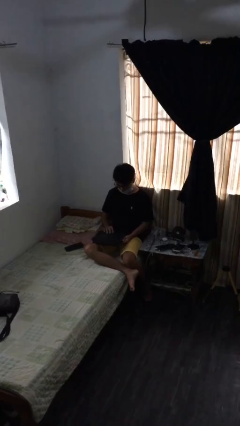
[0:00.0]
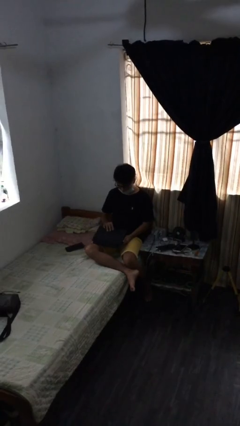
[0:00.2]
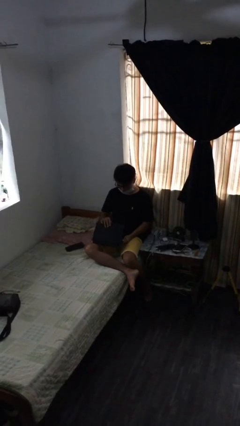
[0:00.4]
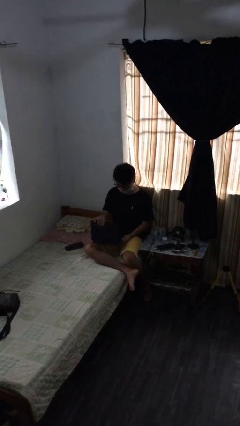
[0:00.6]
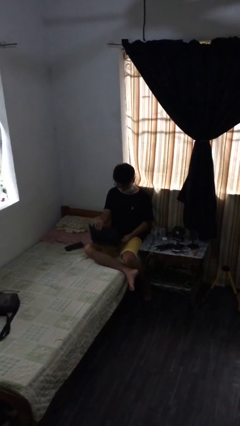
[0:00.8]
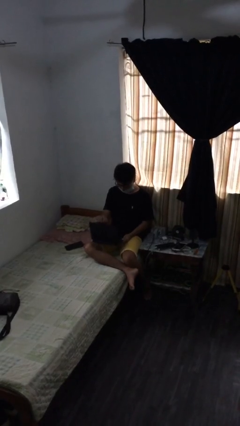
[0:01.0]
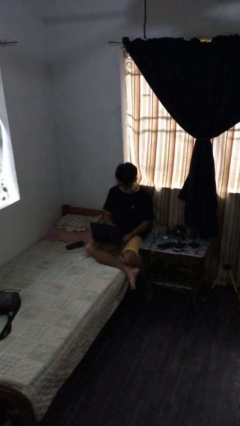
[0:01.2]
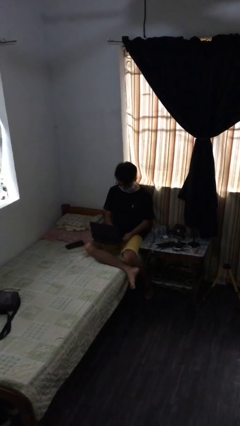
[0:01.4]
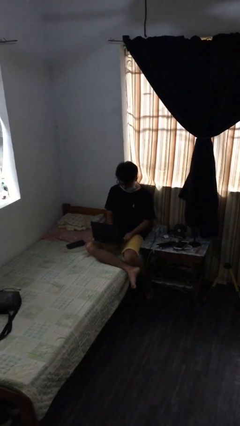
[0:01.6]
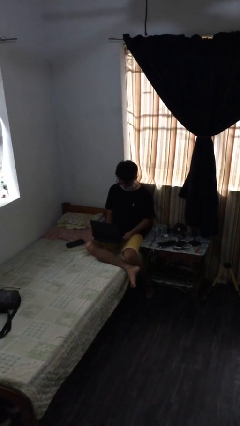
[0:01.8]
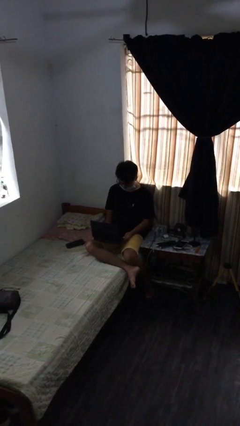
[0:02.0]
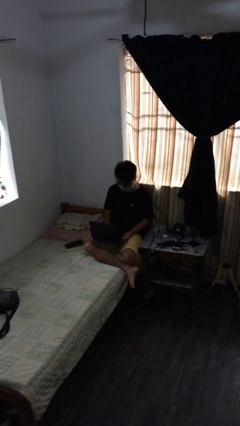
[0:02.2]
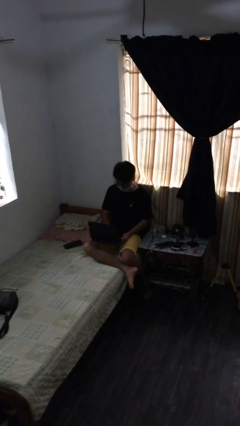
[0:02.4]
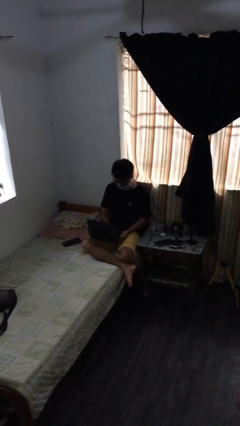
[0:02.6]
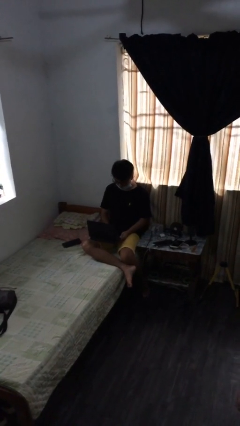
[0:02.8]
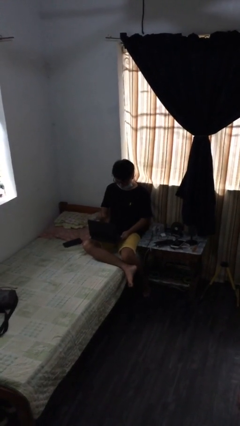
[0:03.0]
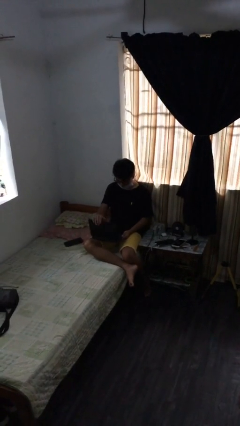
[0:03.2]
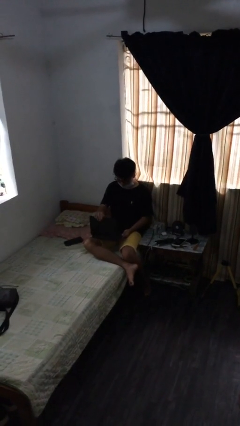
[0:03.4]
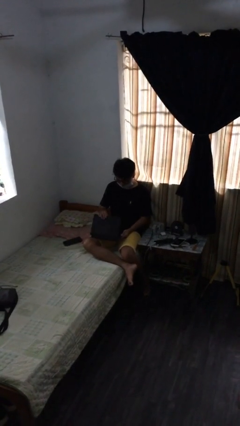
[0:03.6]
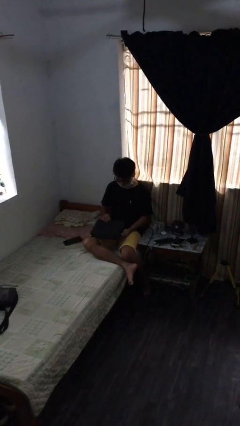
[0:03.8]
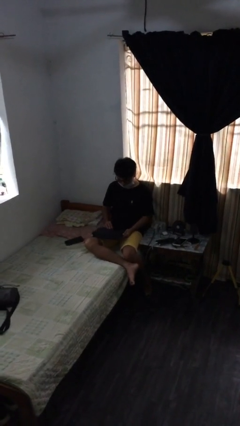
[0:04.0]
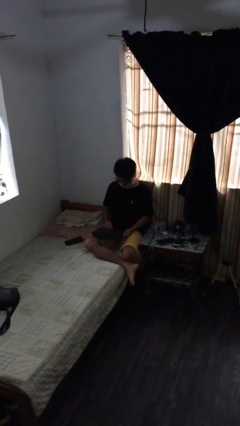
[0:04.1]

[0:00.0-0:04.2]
person interacts with laptop

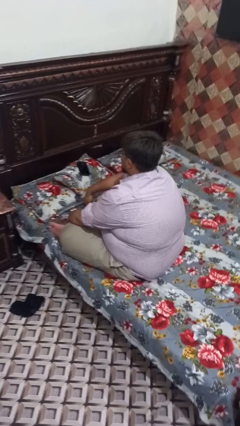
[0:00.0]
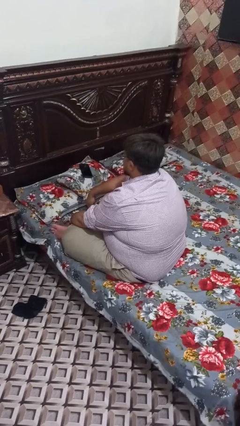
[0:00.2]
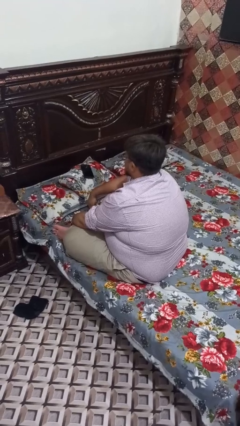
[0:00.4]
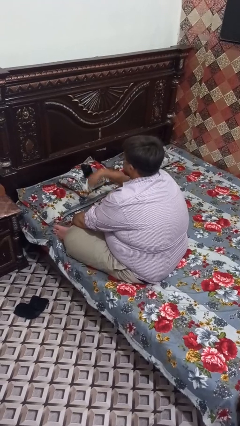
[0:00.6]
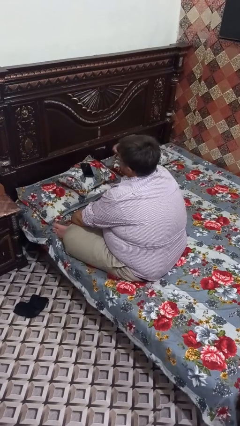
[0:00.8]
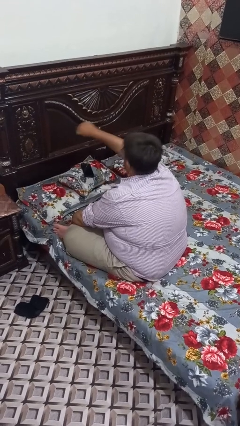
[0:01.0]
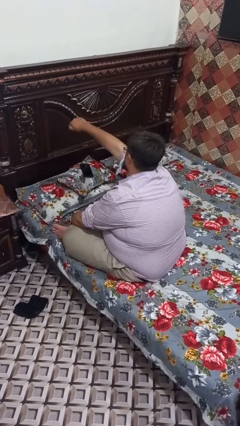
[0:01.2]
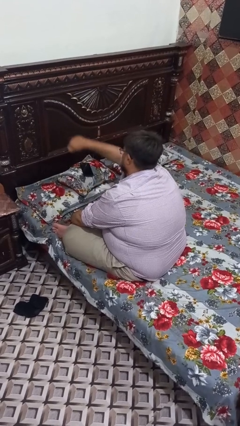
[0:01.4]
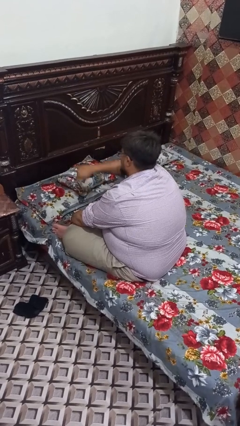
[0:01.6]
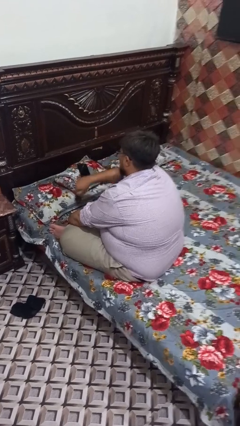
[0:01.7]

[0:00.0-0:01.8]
person punches

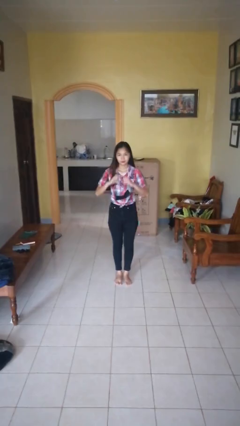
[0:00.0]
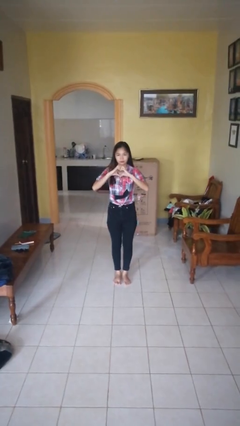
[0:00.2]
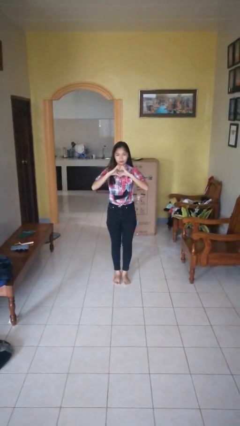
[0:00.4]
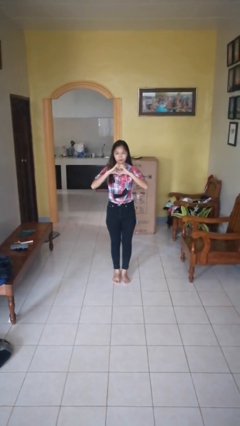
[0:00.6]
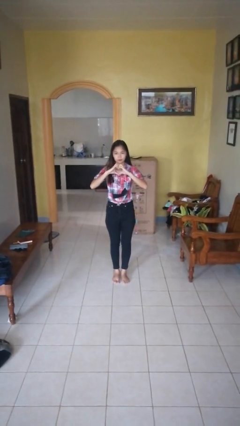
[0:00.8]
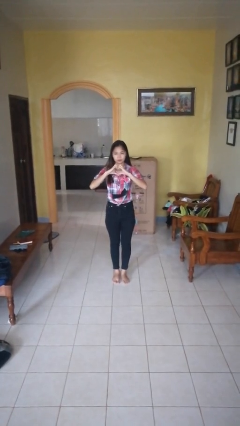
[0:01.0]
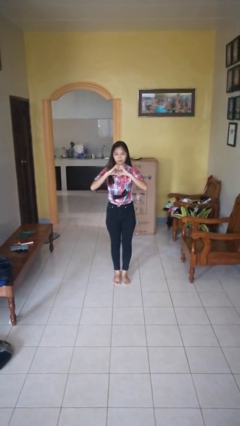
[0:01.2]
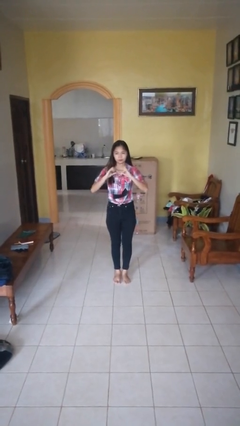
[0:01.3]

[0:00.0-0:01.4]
person gestures heart

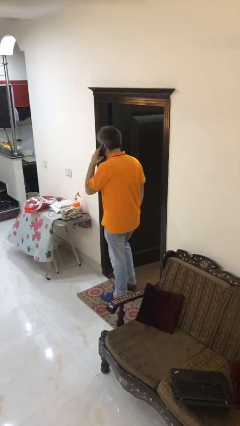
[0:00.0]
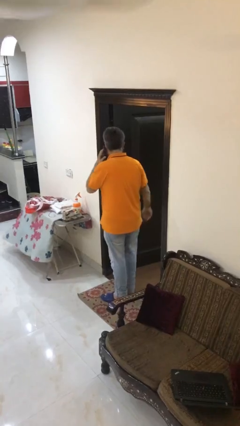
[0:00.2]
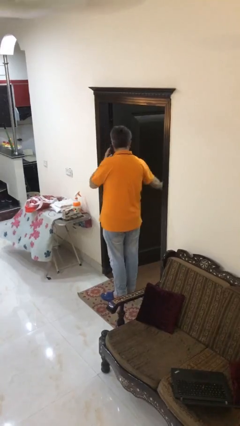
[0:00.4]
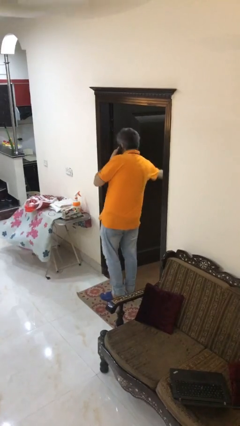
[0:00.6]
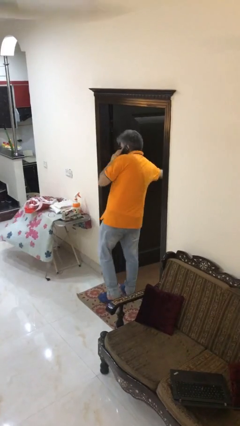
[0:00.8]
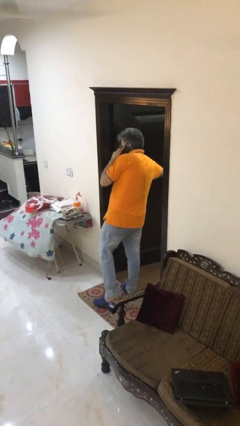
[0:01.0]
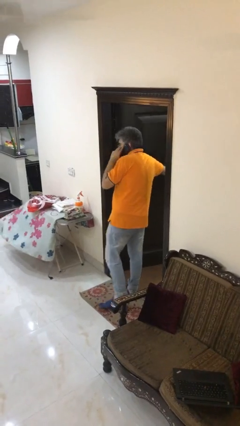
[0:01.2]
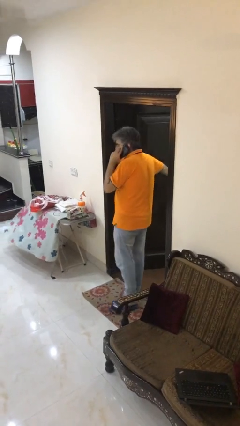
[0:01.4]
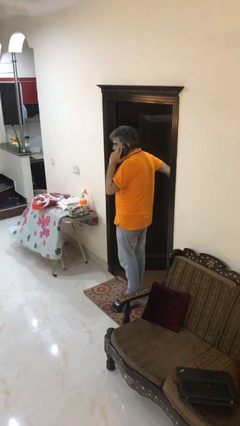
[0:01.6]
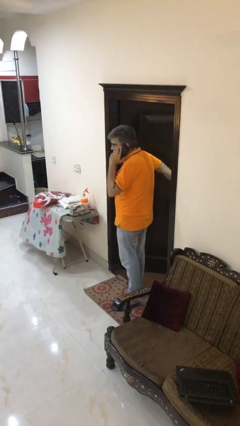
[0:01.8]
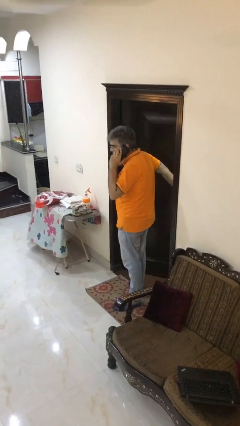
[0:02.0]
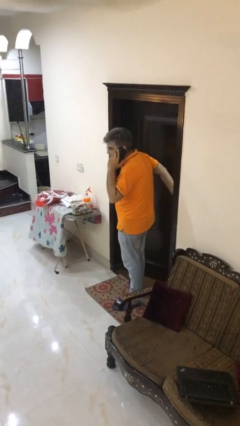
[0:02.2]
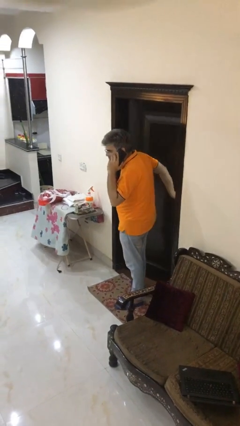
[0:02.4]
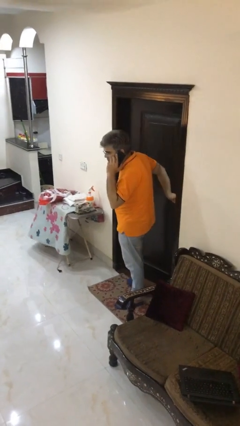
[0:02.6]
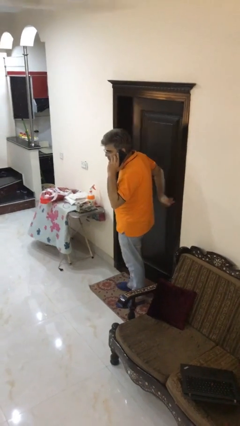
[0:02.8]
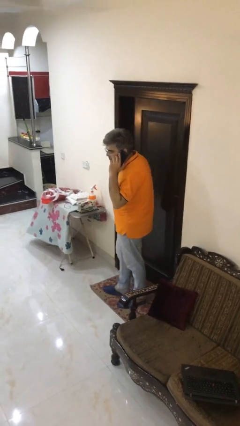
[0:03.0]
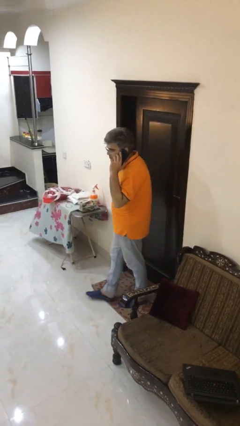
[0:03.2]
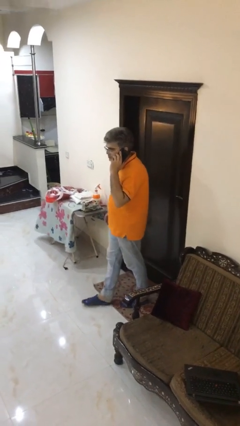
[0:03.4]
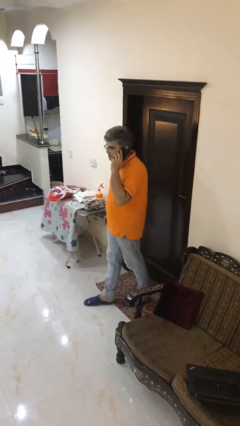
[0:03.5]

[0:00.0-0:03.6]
person closes facility door

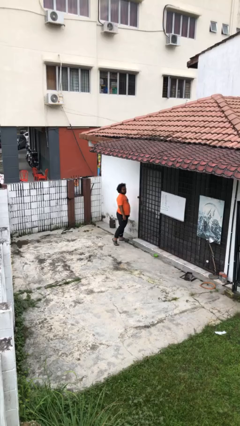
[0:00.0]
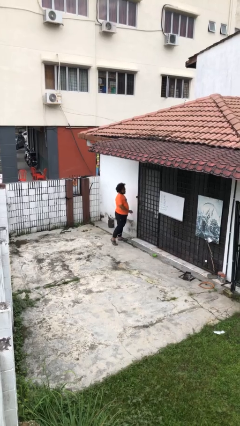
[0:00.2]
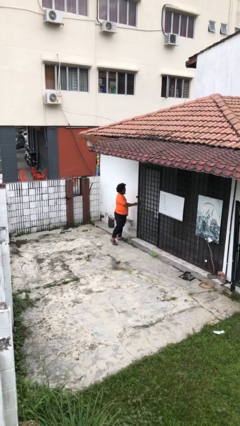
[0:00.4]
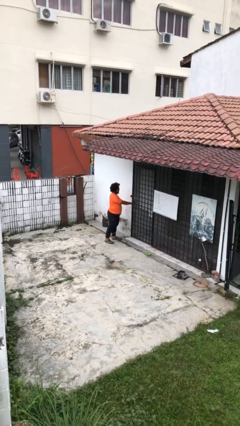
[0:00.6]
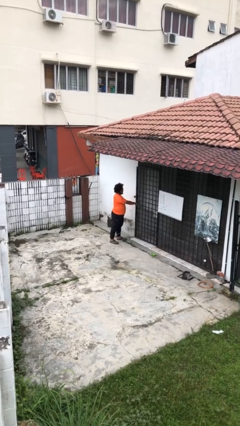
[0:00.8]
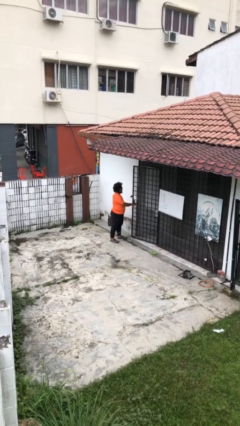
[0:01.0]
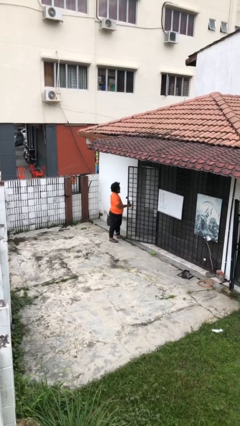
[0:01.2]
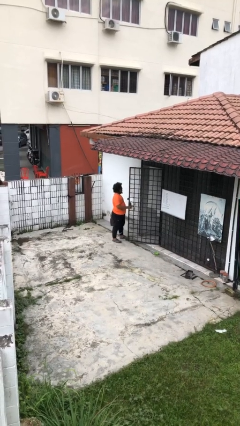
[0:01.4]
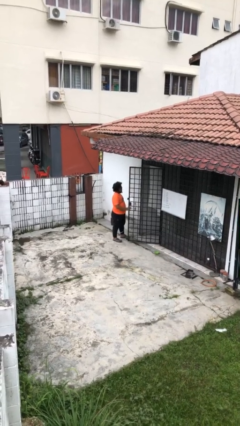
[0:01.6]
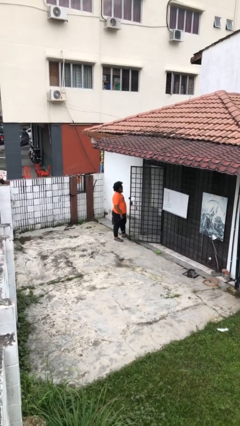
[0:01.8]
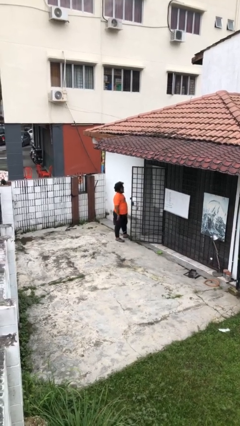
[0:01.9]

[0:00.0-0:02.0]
person opens facility door

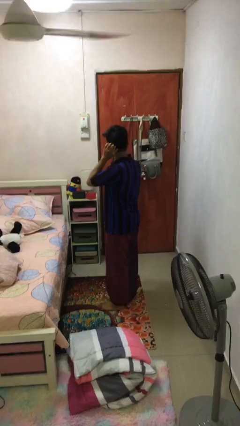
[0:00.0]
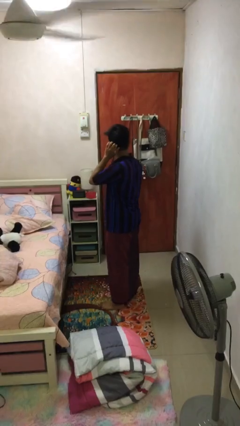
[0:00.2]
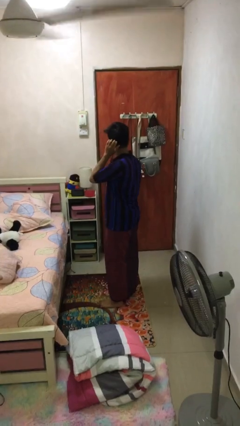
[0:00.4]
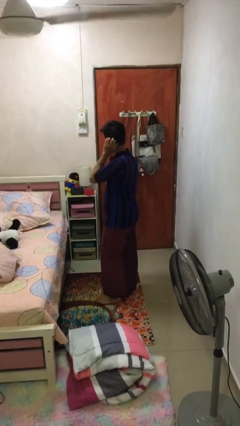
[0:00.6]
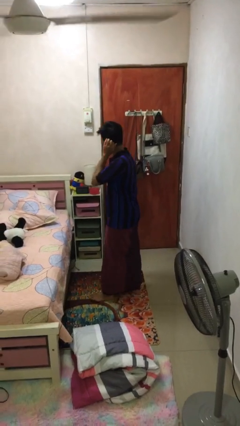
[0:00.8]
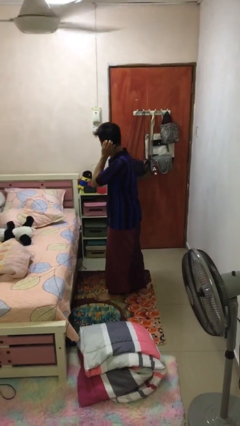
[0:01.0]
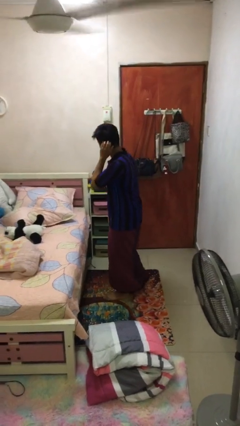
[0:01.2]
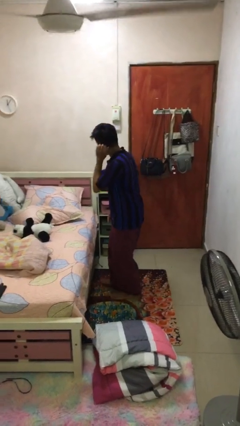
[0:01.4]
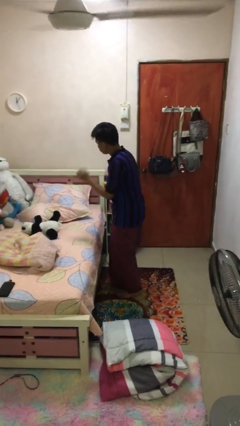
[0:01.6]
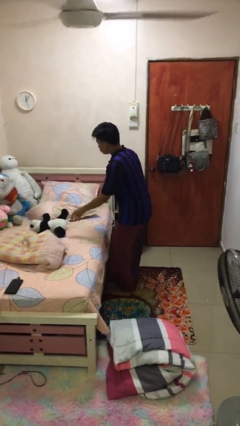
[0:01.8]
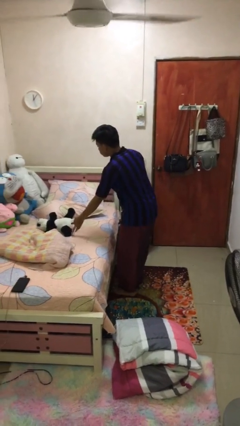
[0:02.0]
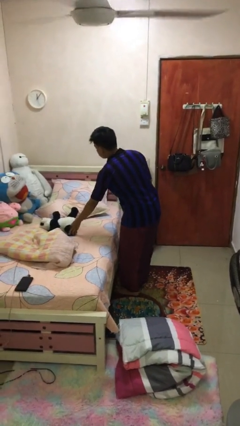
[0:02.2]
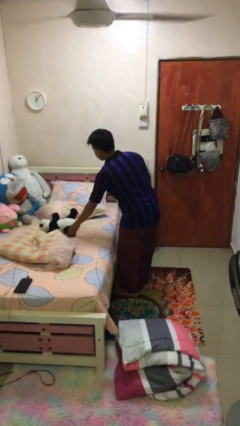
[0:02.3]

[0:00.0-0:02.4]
person picks up object from bed

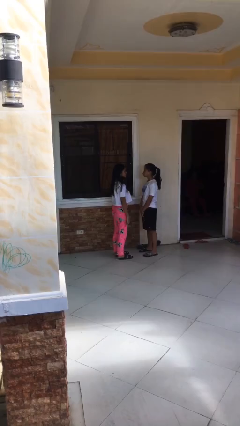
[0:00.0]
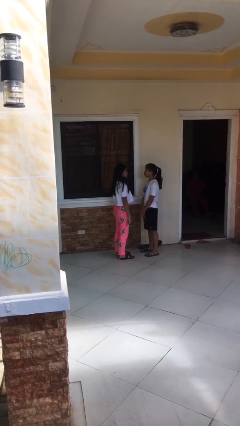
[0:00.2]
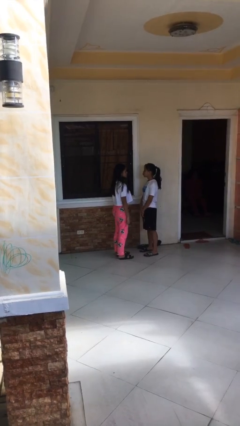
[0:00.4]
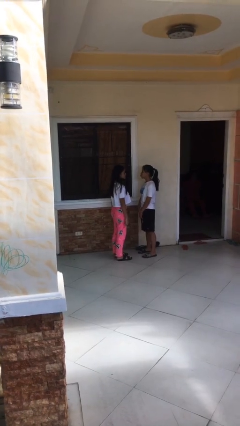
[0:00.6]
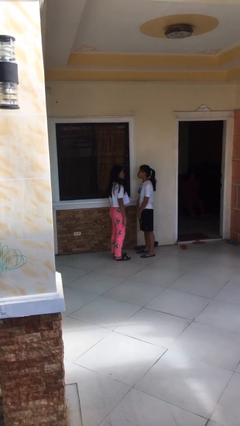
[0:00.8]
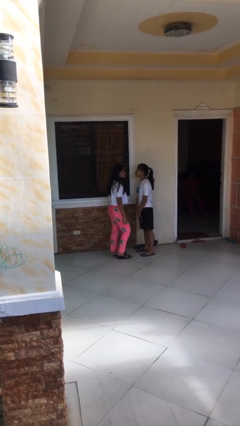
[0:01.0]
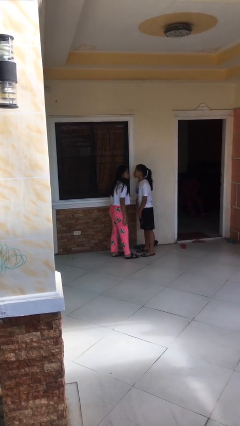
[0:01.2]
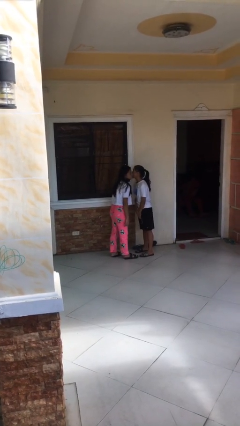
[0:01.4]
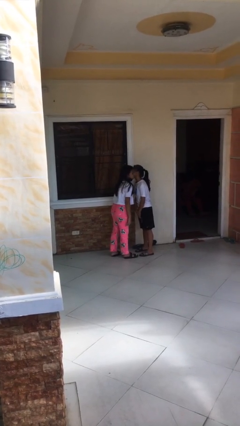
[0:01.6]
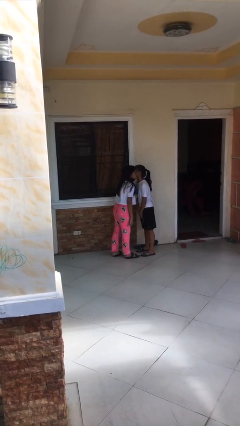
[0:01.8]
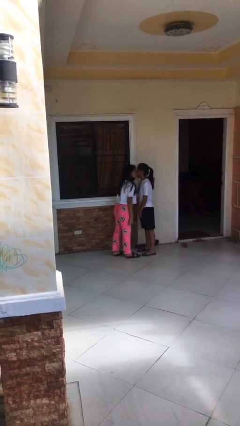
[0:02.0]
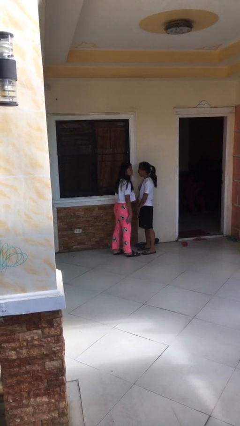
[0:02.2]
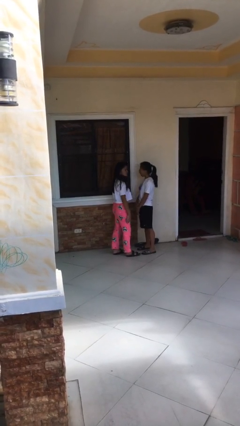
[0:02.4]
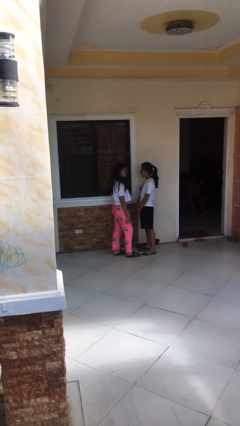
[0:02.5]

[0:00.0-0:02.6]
person kisses cheek of person
